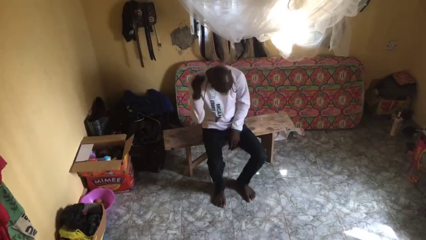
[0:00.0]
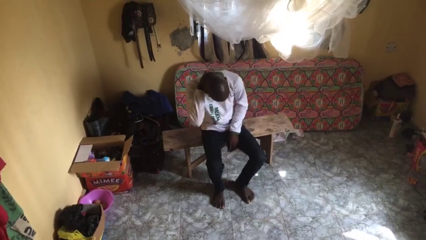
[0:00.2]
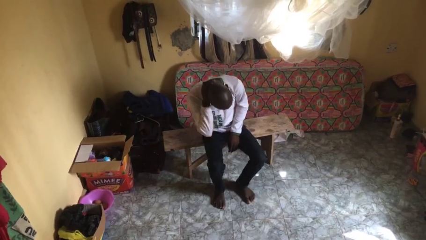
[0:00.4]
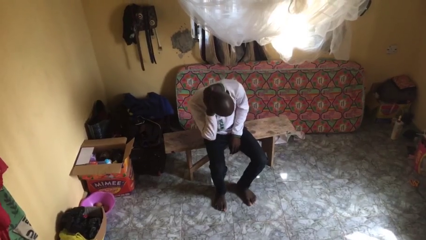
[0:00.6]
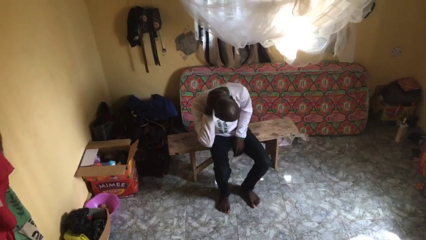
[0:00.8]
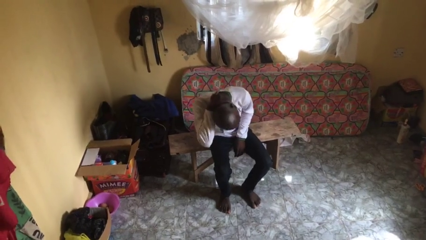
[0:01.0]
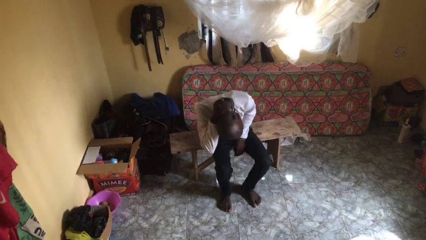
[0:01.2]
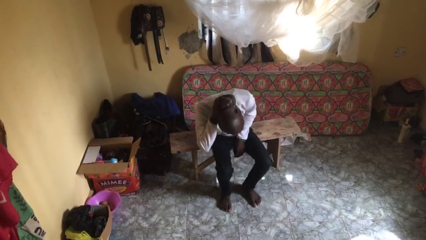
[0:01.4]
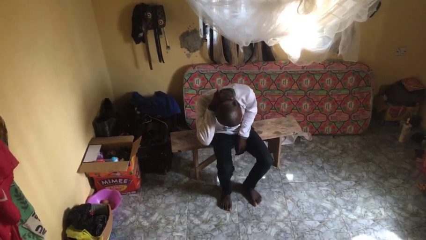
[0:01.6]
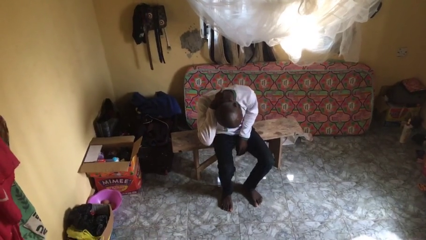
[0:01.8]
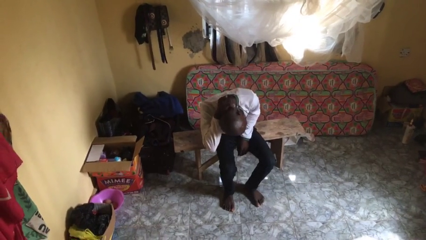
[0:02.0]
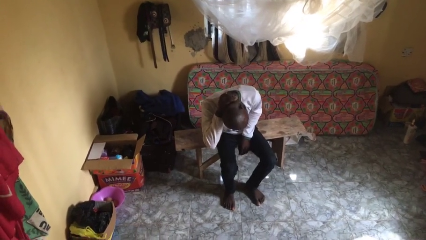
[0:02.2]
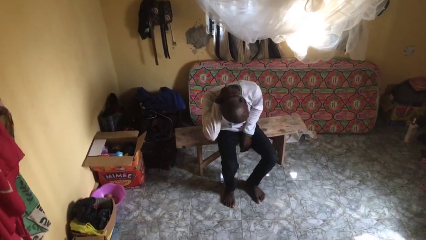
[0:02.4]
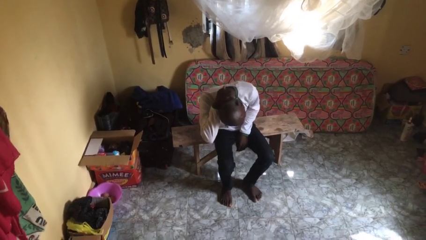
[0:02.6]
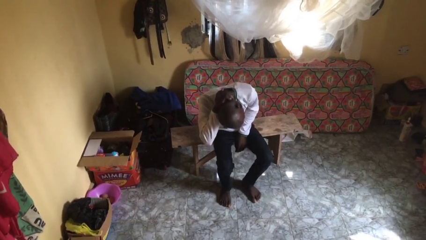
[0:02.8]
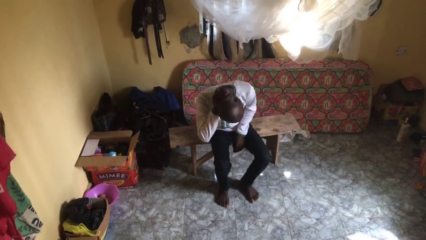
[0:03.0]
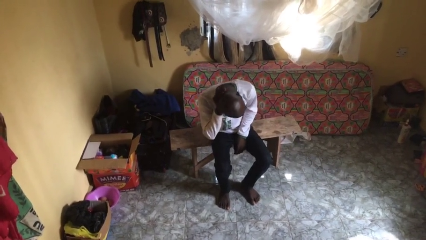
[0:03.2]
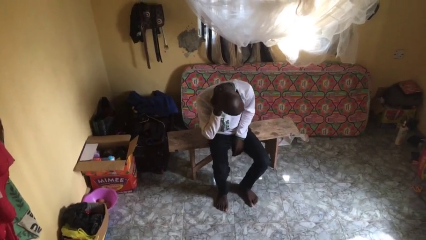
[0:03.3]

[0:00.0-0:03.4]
person rubs neck

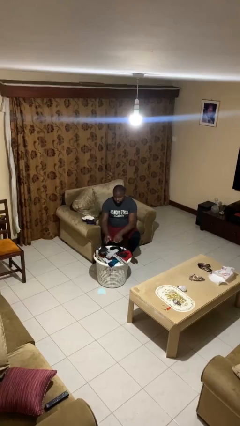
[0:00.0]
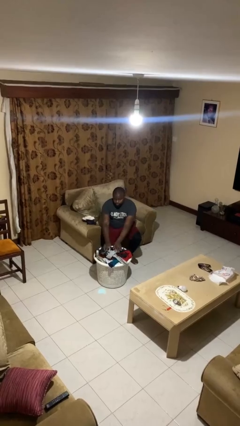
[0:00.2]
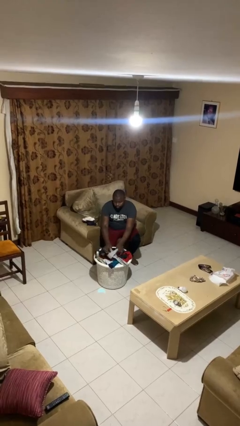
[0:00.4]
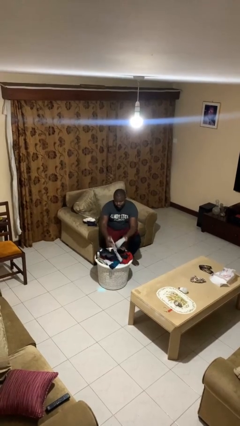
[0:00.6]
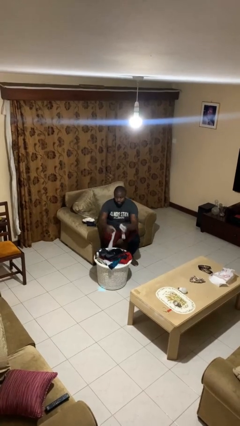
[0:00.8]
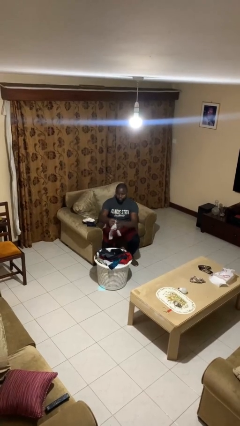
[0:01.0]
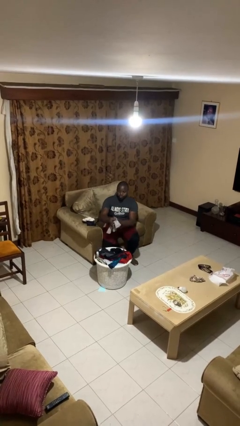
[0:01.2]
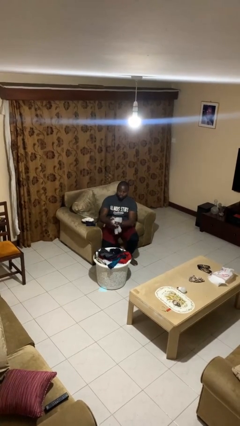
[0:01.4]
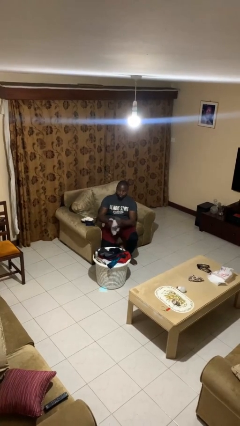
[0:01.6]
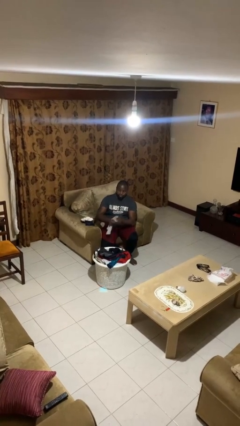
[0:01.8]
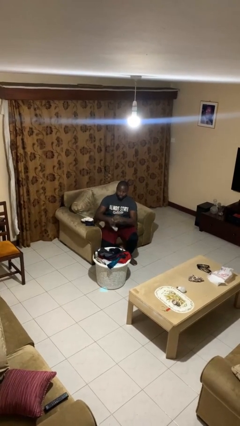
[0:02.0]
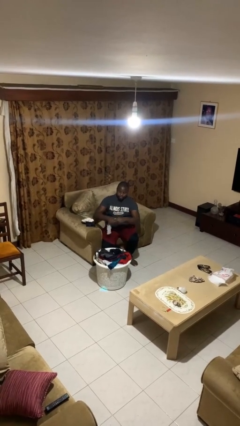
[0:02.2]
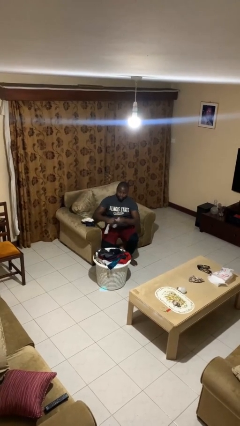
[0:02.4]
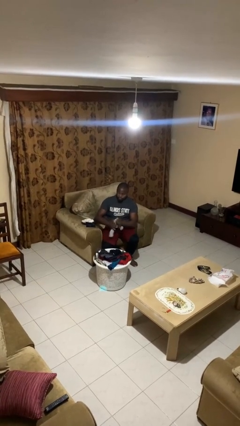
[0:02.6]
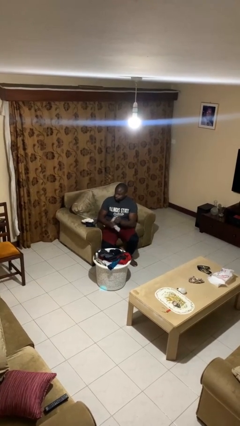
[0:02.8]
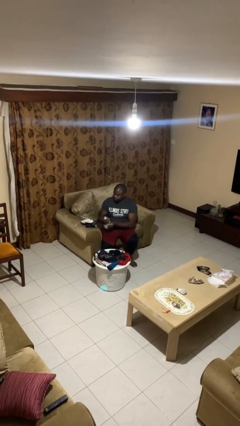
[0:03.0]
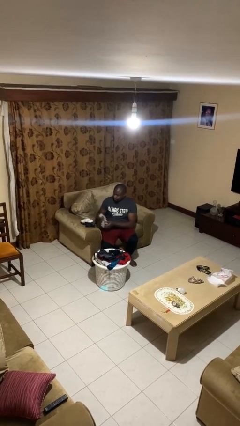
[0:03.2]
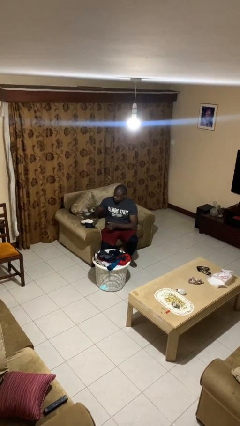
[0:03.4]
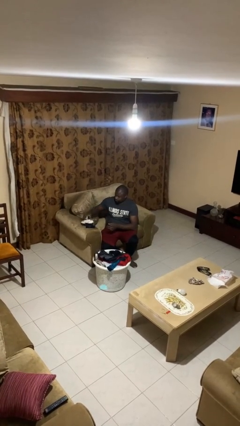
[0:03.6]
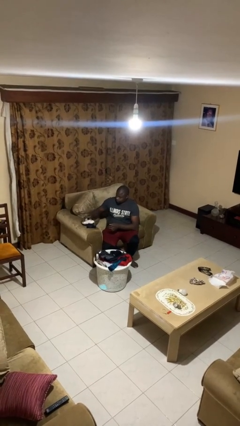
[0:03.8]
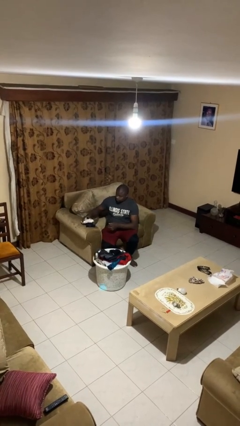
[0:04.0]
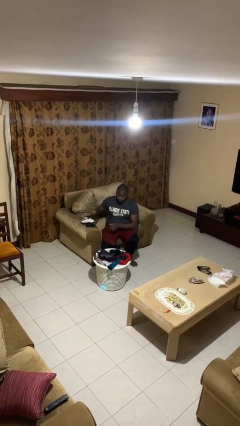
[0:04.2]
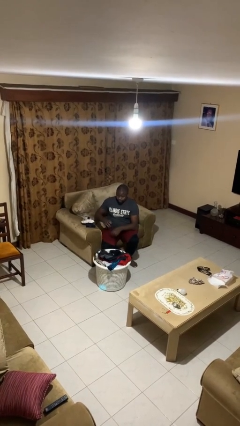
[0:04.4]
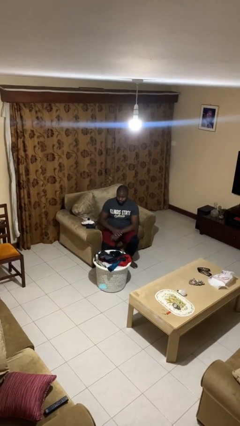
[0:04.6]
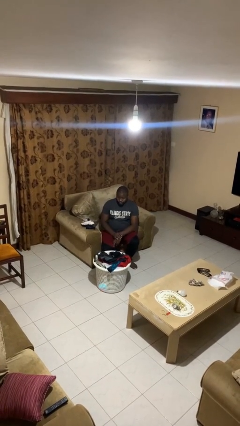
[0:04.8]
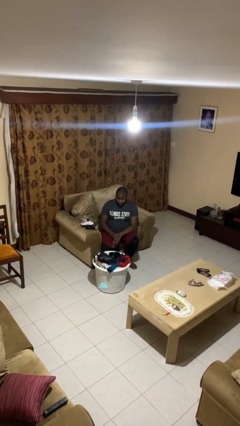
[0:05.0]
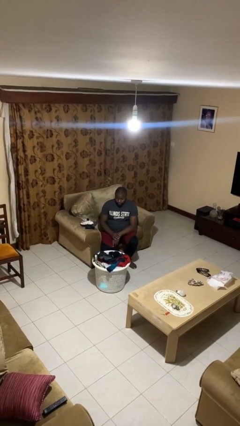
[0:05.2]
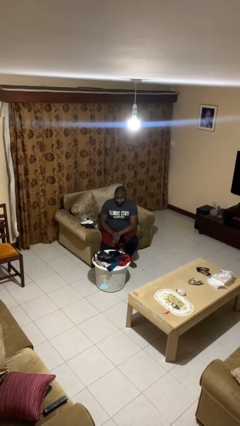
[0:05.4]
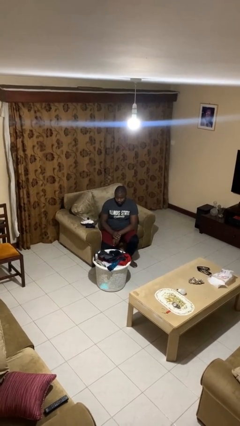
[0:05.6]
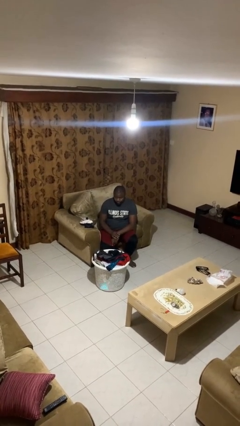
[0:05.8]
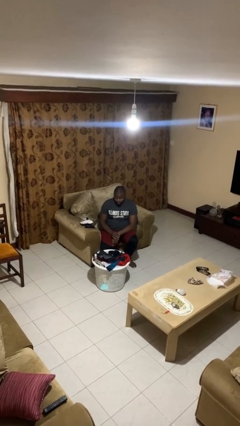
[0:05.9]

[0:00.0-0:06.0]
person folds socks

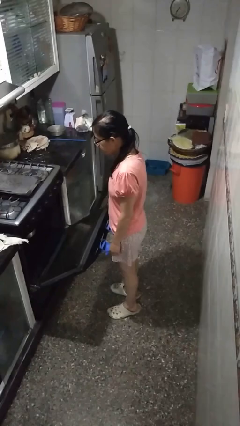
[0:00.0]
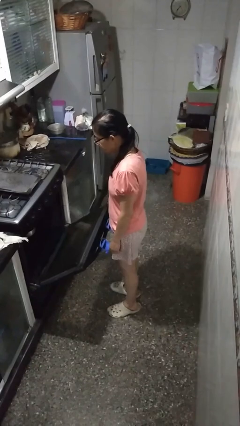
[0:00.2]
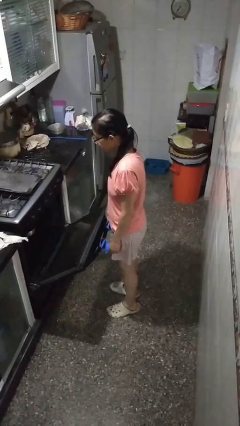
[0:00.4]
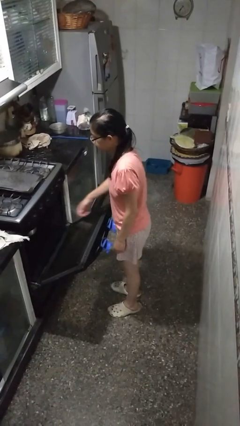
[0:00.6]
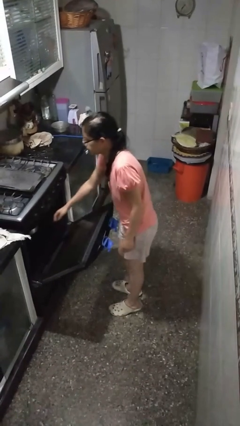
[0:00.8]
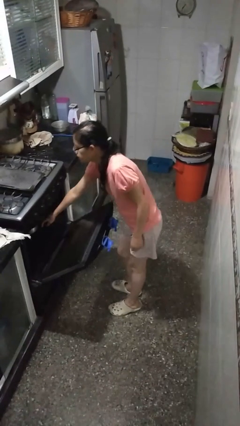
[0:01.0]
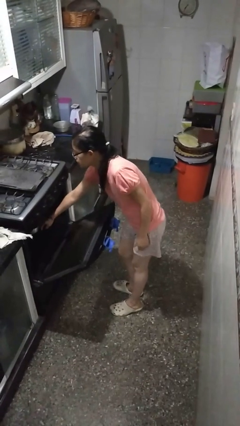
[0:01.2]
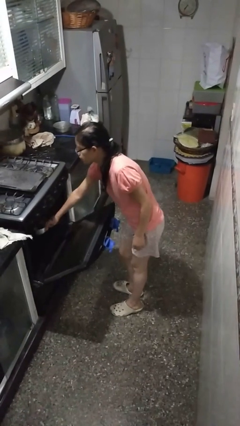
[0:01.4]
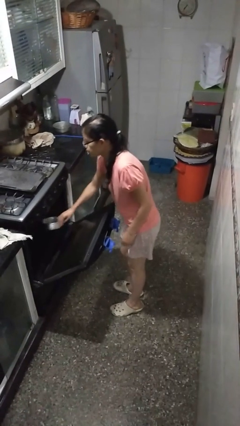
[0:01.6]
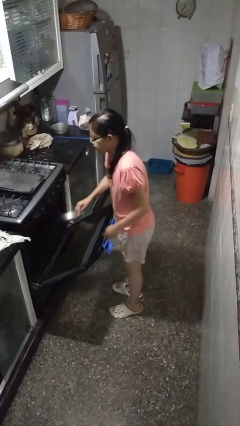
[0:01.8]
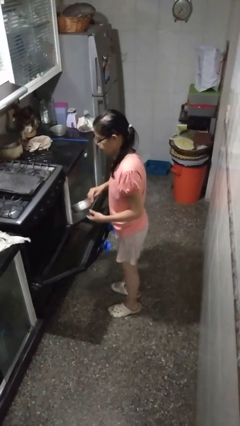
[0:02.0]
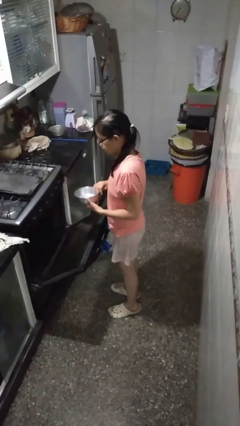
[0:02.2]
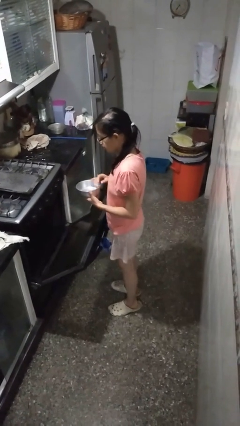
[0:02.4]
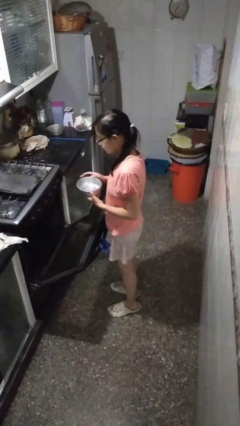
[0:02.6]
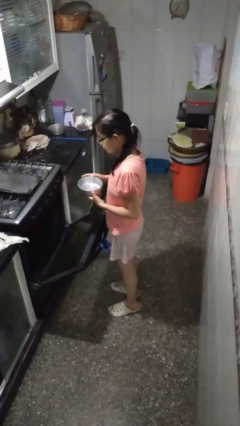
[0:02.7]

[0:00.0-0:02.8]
person takes object from oven

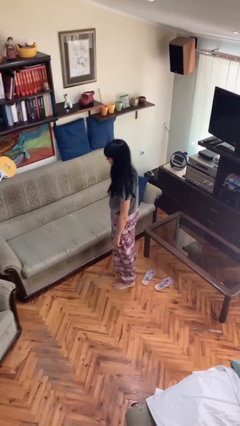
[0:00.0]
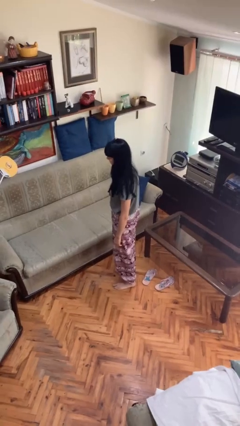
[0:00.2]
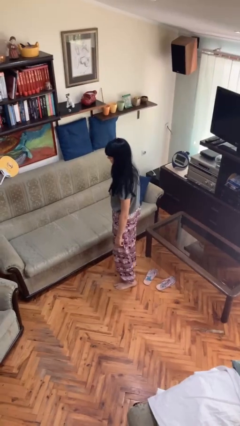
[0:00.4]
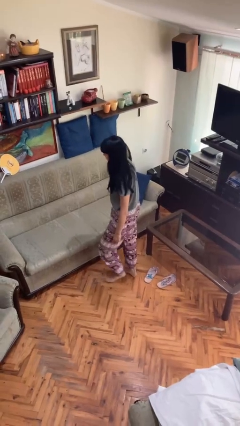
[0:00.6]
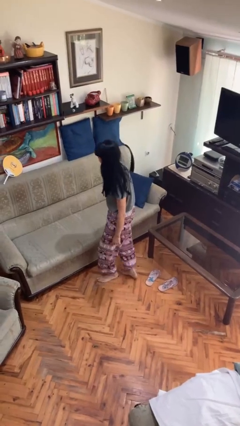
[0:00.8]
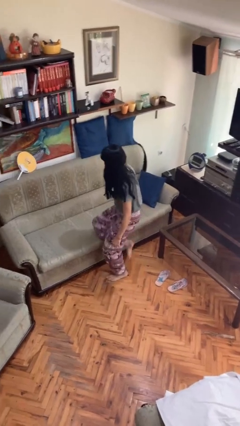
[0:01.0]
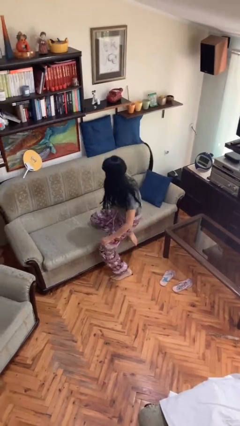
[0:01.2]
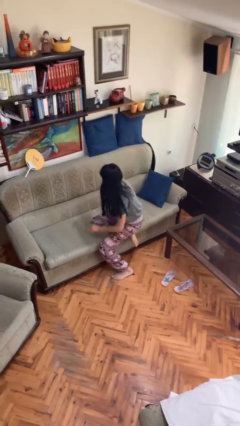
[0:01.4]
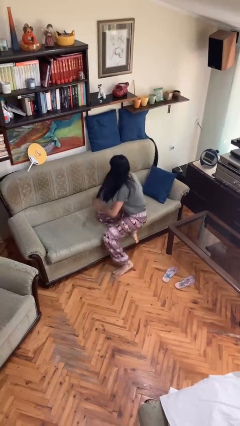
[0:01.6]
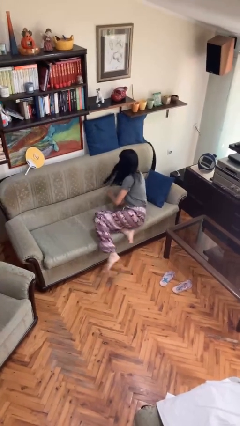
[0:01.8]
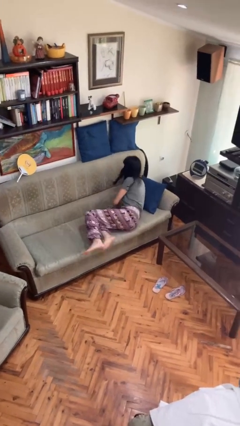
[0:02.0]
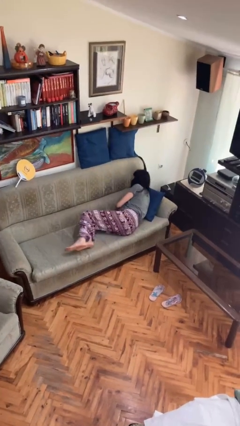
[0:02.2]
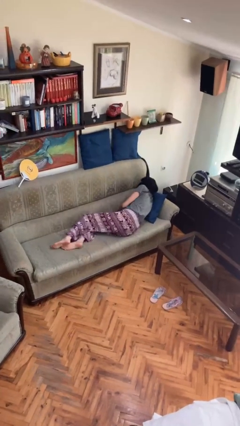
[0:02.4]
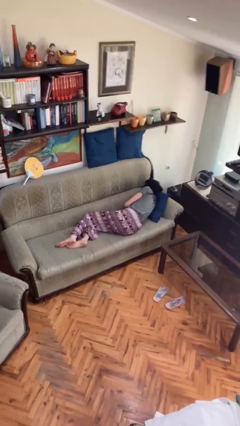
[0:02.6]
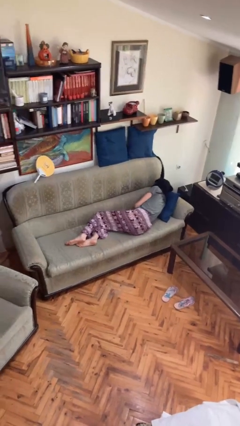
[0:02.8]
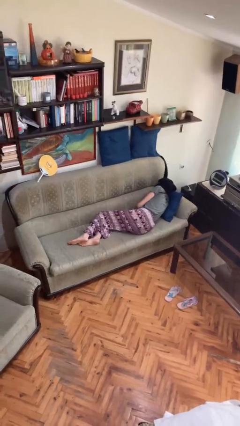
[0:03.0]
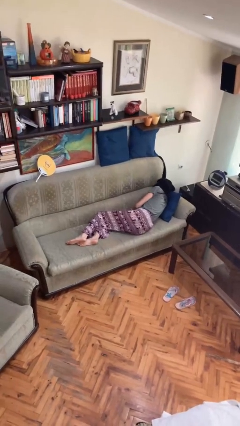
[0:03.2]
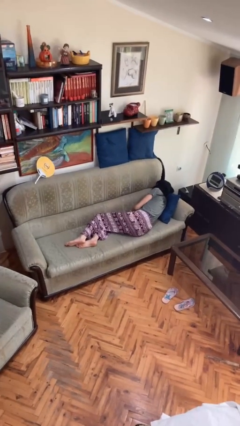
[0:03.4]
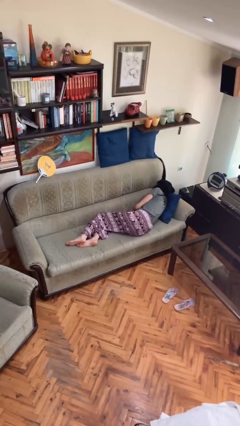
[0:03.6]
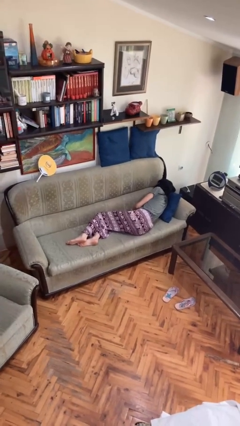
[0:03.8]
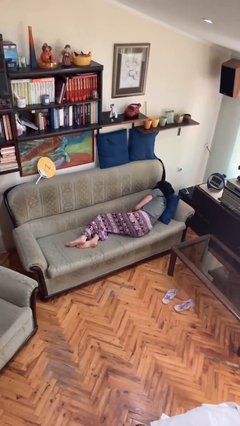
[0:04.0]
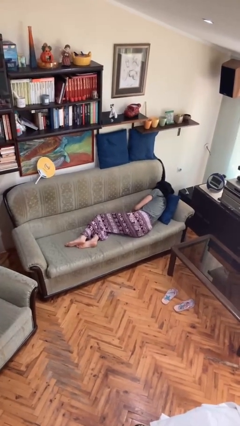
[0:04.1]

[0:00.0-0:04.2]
person lies down on couch

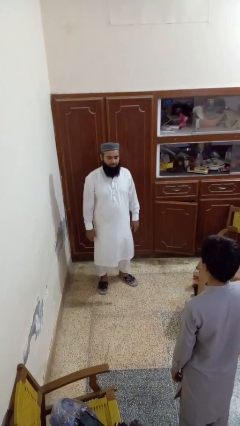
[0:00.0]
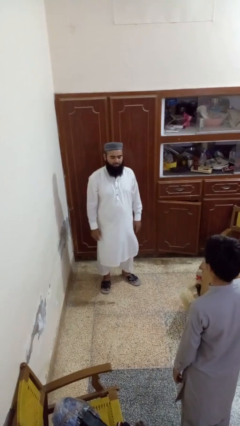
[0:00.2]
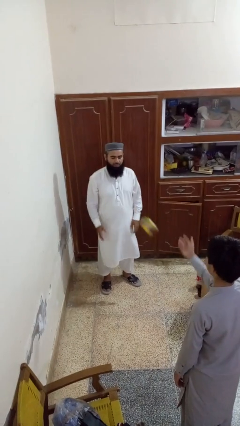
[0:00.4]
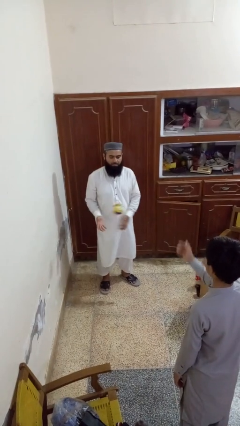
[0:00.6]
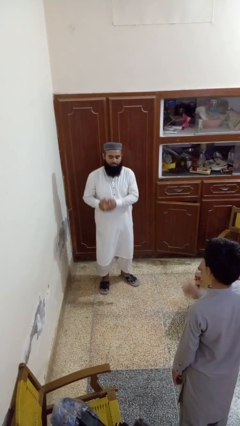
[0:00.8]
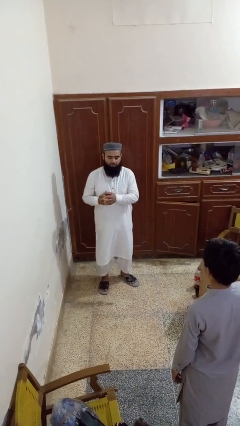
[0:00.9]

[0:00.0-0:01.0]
person catches object from person
